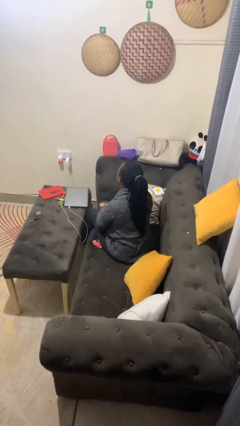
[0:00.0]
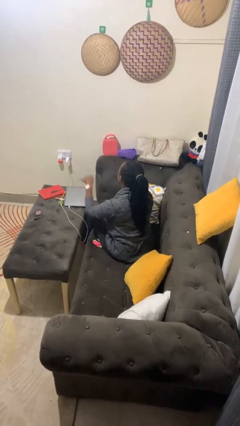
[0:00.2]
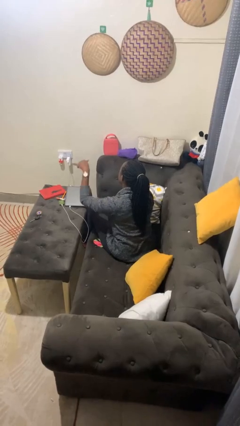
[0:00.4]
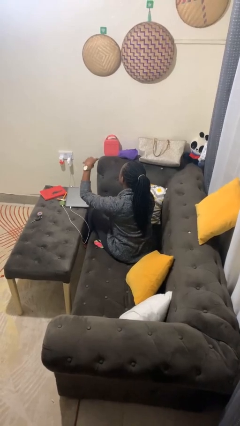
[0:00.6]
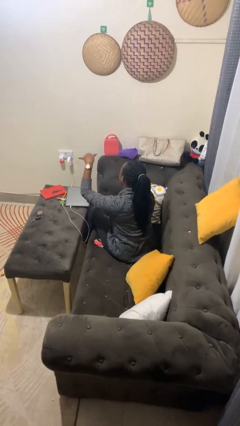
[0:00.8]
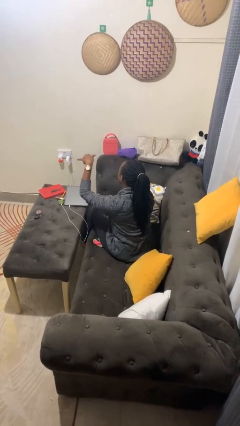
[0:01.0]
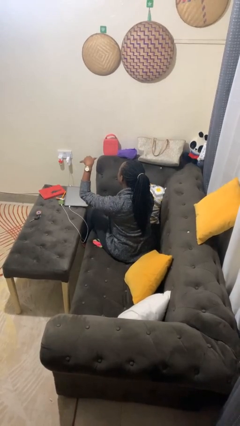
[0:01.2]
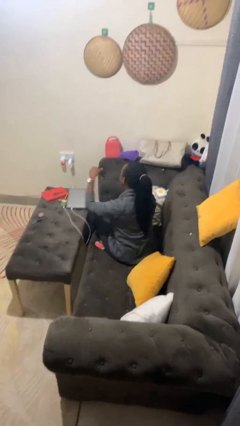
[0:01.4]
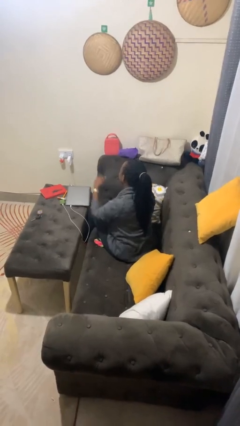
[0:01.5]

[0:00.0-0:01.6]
person gestures hang loose

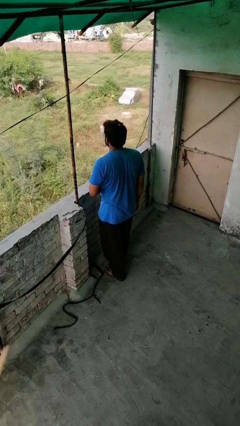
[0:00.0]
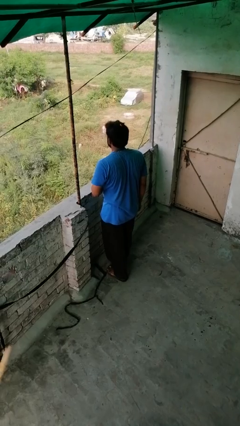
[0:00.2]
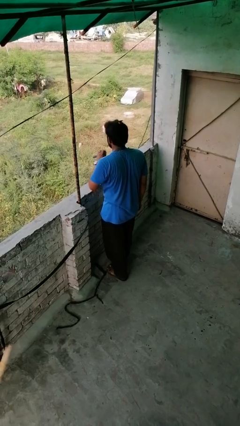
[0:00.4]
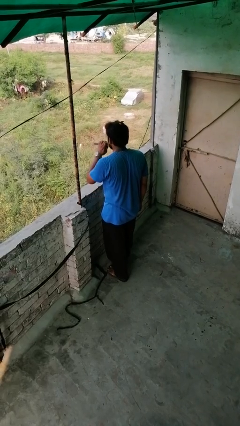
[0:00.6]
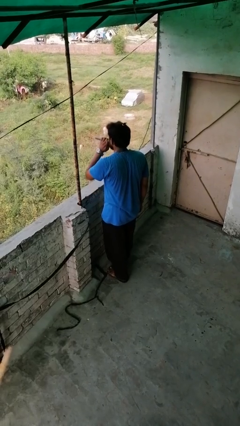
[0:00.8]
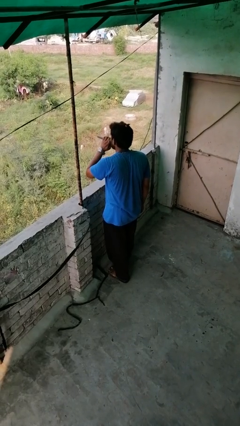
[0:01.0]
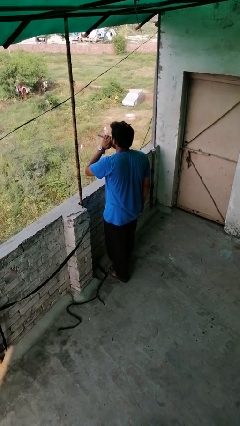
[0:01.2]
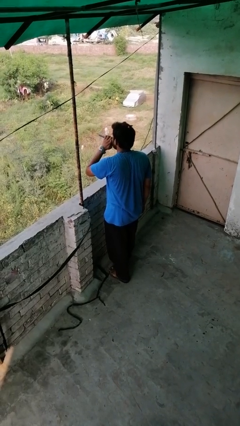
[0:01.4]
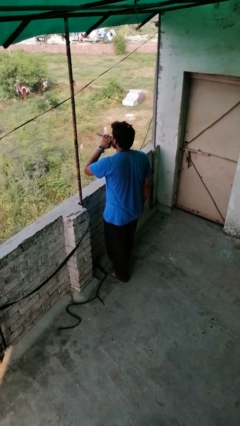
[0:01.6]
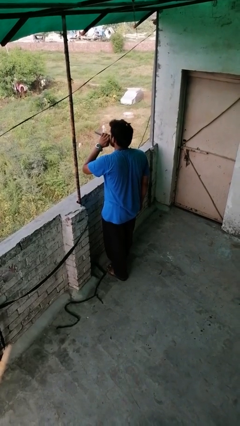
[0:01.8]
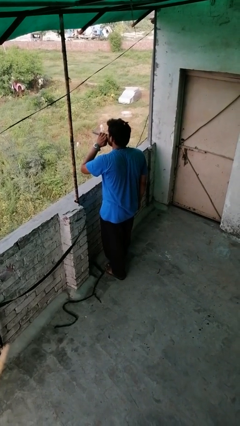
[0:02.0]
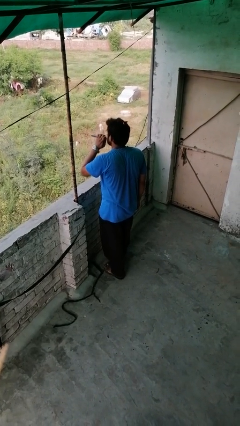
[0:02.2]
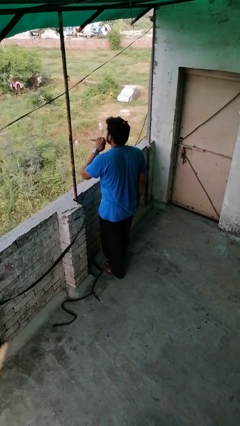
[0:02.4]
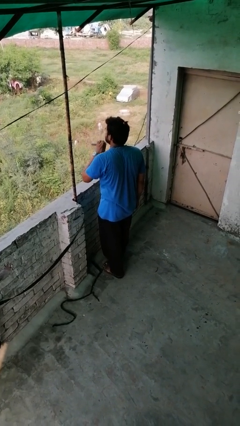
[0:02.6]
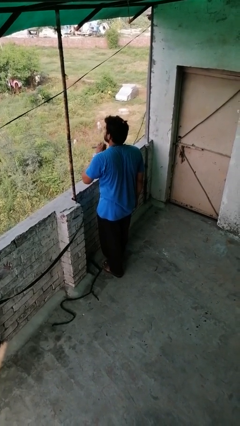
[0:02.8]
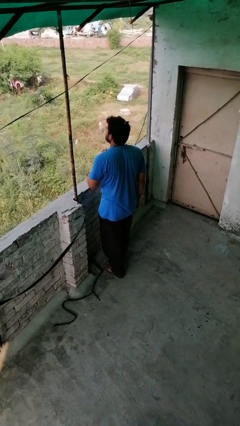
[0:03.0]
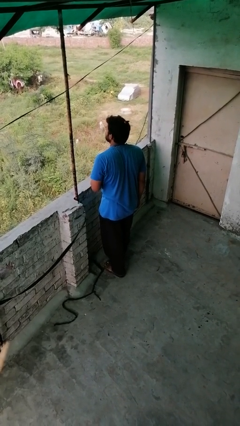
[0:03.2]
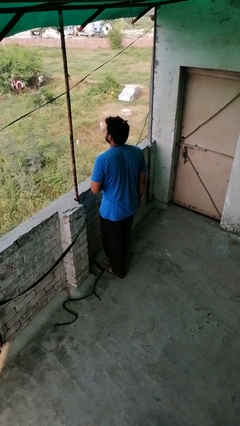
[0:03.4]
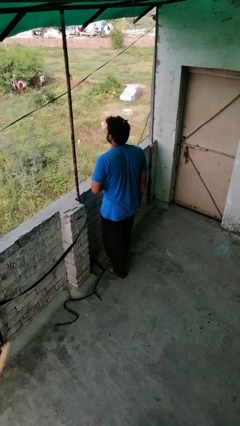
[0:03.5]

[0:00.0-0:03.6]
person vapes

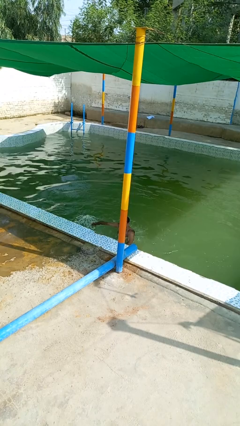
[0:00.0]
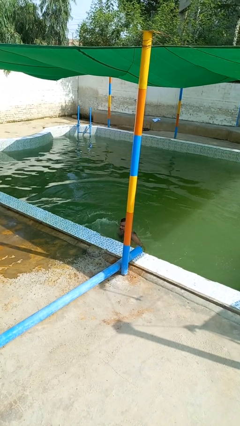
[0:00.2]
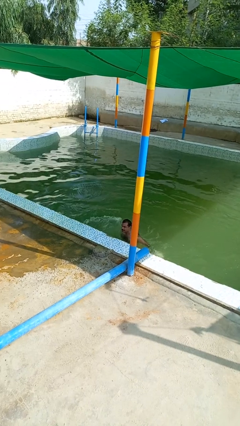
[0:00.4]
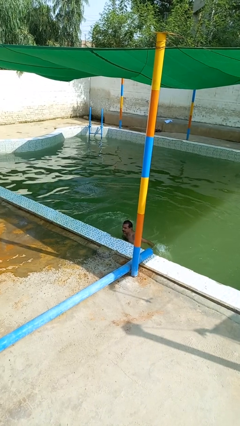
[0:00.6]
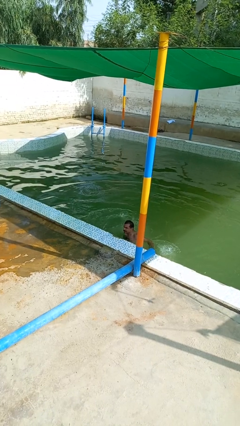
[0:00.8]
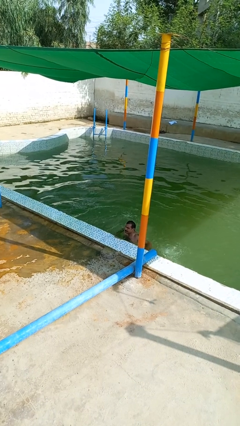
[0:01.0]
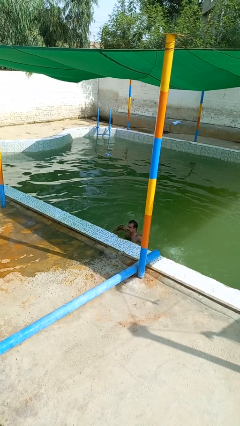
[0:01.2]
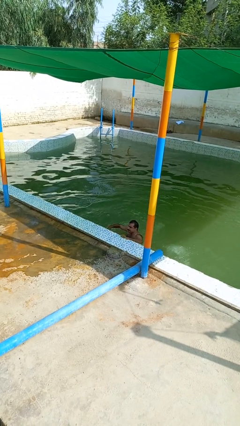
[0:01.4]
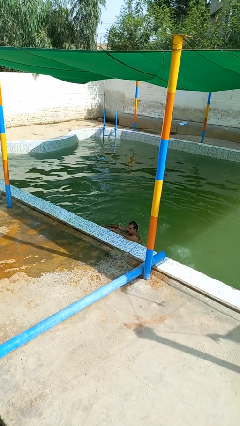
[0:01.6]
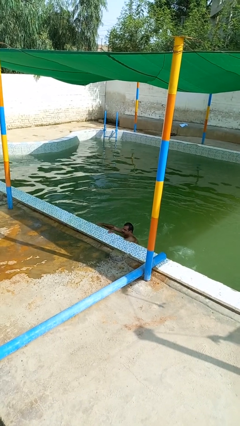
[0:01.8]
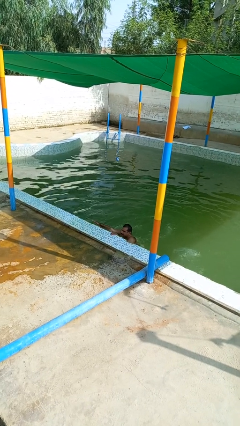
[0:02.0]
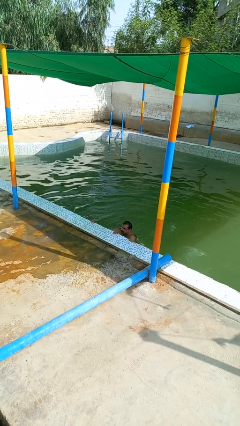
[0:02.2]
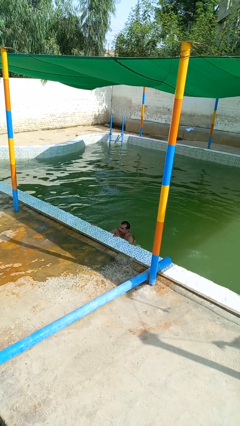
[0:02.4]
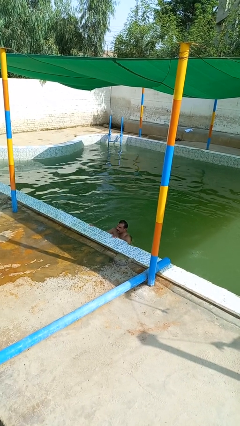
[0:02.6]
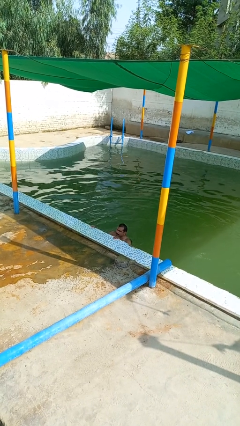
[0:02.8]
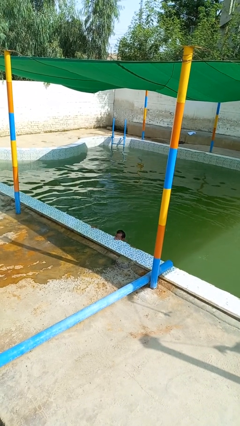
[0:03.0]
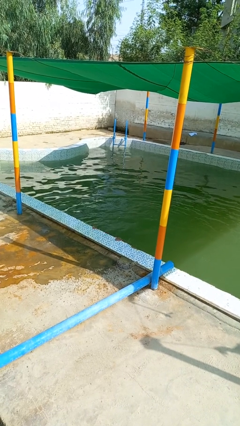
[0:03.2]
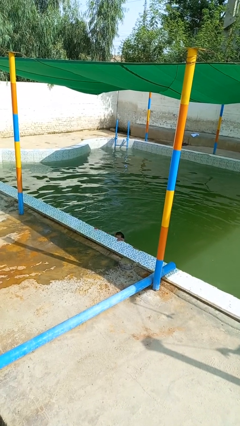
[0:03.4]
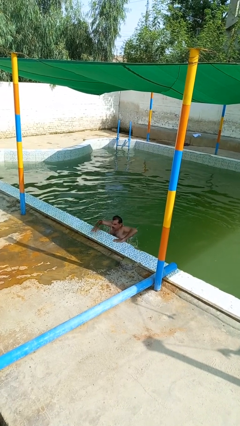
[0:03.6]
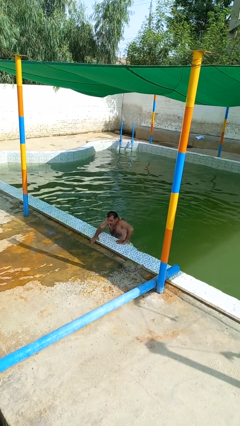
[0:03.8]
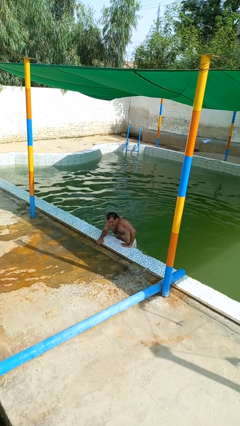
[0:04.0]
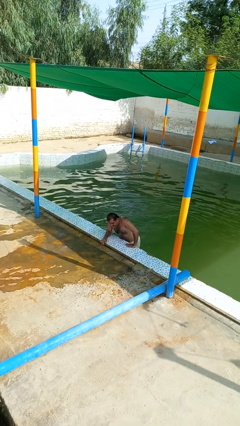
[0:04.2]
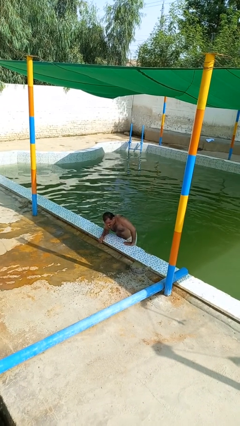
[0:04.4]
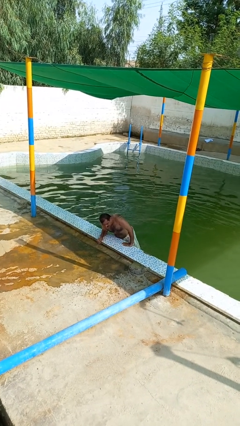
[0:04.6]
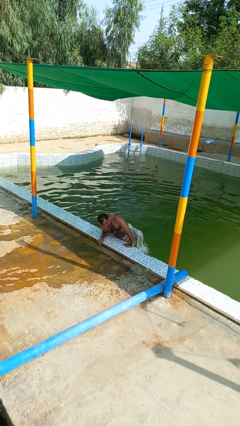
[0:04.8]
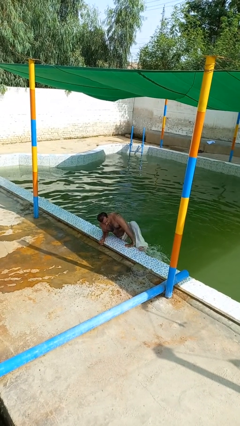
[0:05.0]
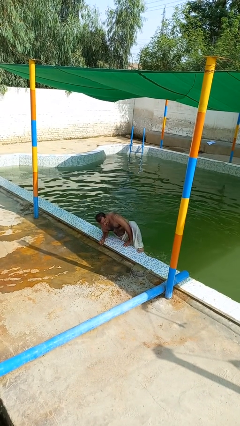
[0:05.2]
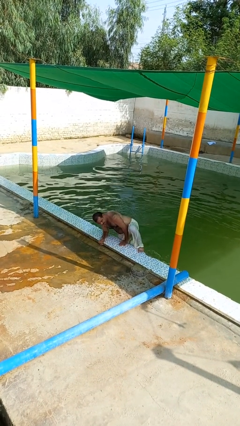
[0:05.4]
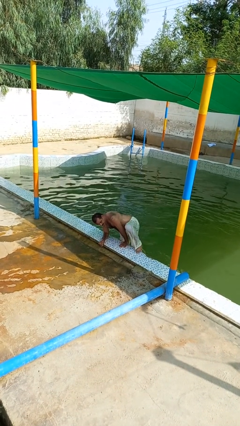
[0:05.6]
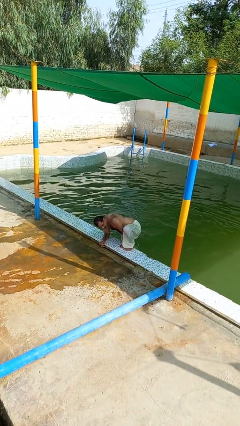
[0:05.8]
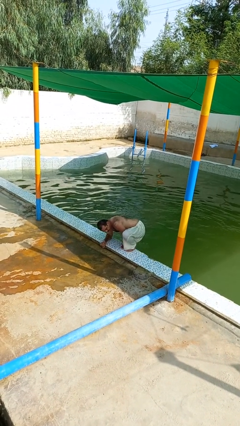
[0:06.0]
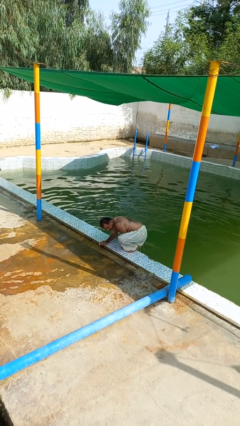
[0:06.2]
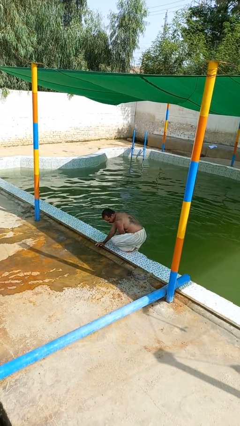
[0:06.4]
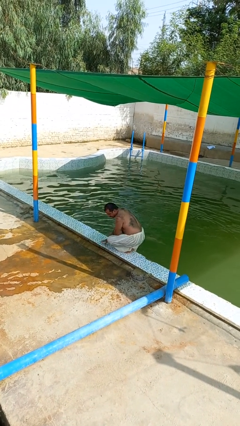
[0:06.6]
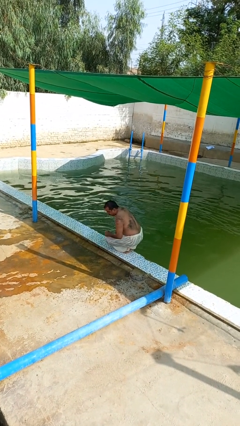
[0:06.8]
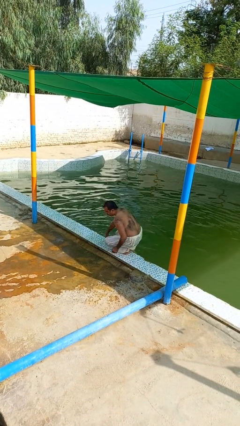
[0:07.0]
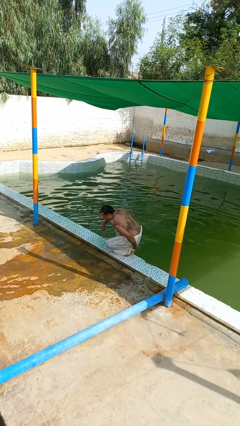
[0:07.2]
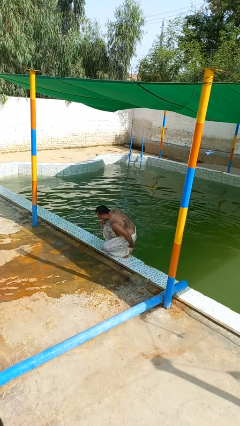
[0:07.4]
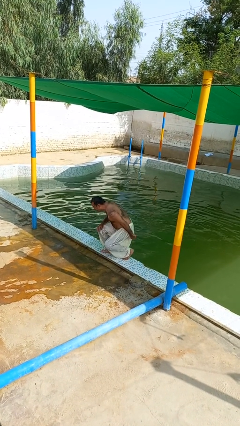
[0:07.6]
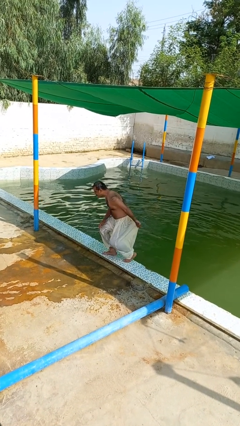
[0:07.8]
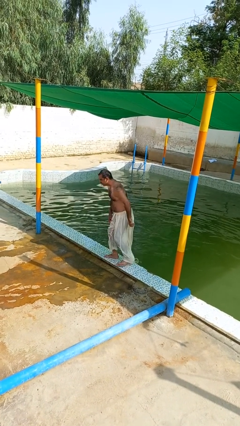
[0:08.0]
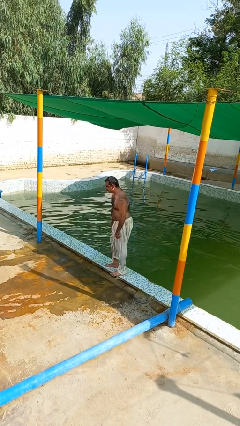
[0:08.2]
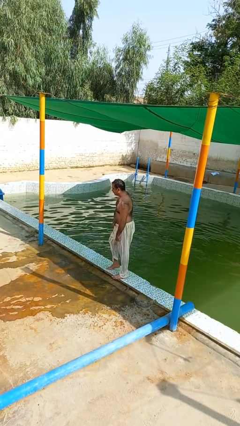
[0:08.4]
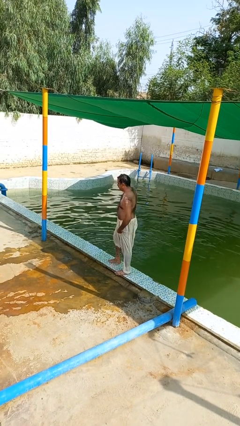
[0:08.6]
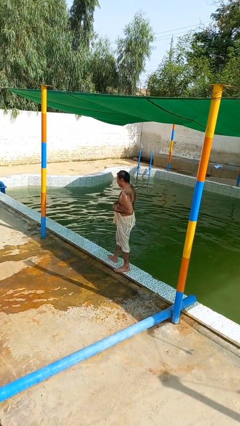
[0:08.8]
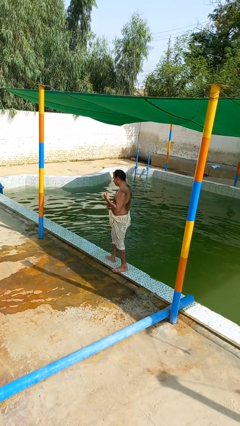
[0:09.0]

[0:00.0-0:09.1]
person exits pool

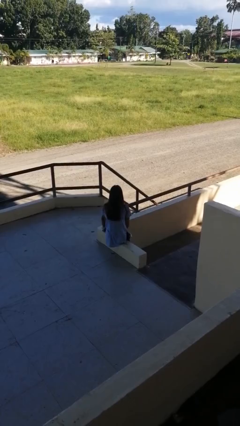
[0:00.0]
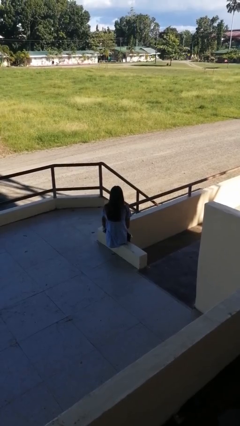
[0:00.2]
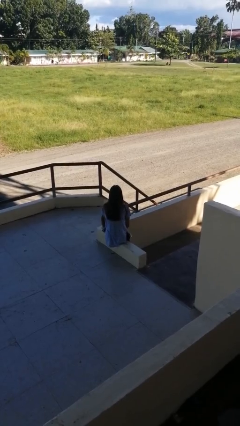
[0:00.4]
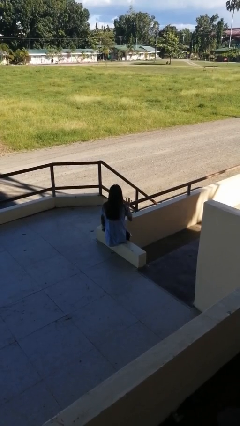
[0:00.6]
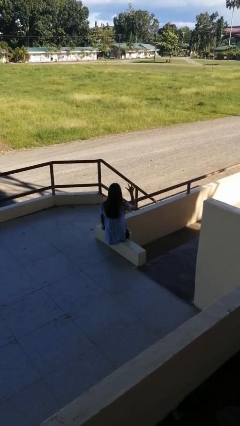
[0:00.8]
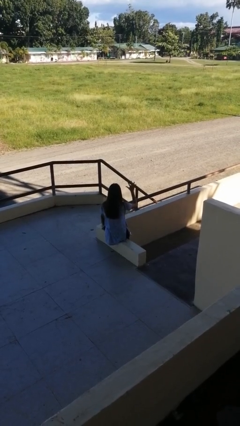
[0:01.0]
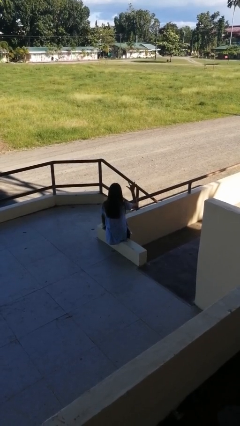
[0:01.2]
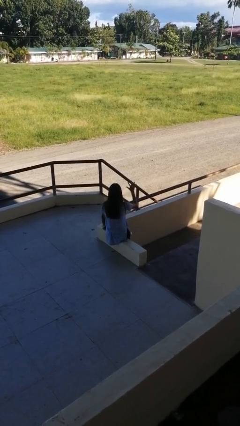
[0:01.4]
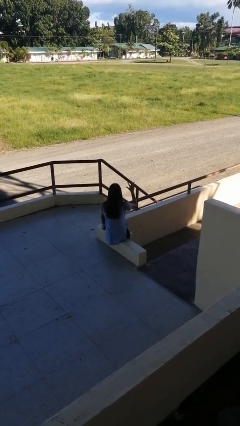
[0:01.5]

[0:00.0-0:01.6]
person gestures number five

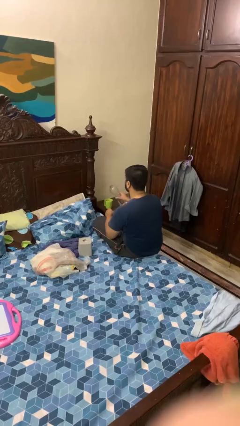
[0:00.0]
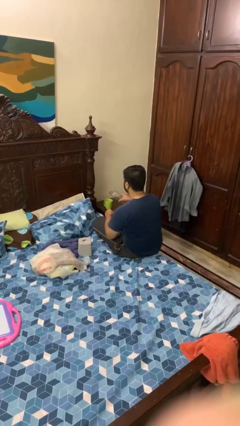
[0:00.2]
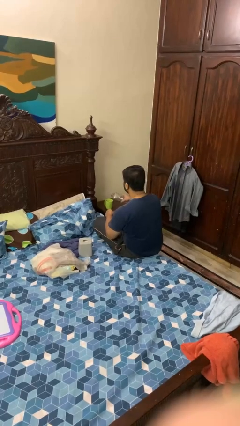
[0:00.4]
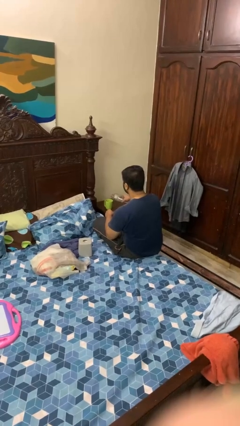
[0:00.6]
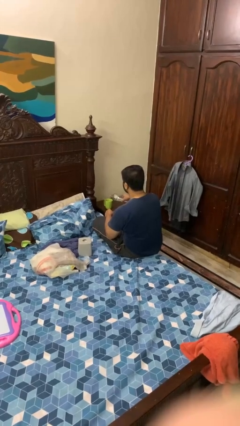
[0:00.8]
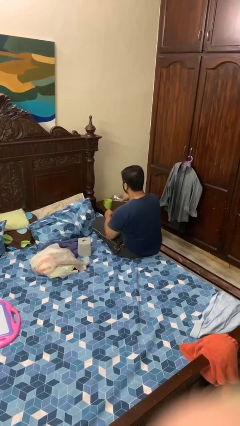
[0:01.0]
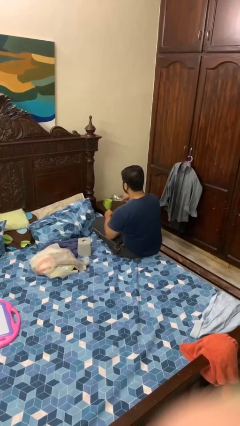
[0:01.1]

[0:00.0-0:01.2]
person pours liquid into cup

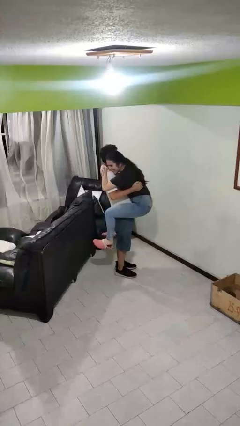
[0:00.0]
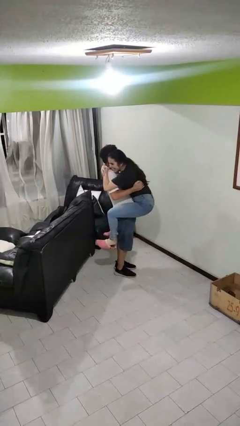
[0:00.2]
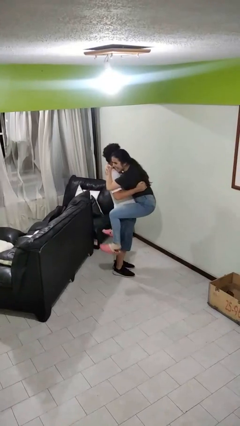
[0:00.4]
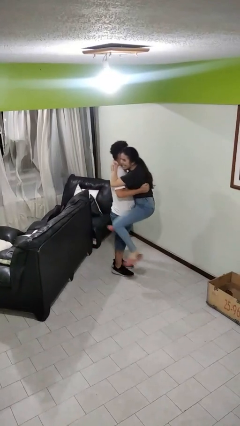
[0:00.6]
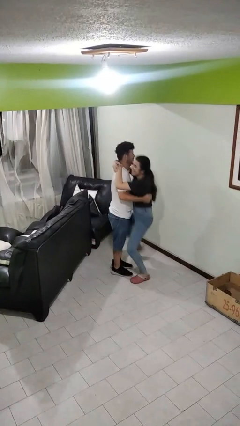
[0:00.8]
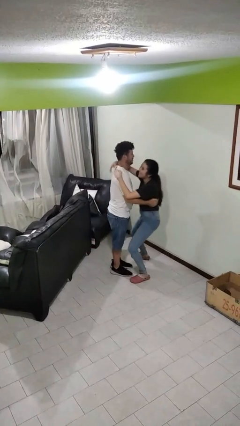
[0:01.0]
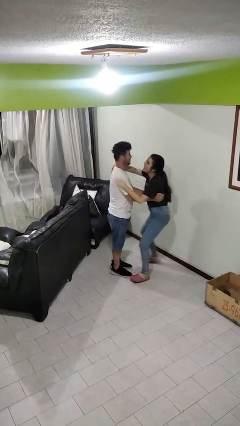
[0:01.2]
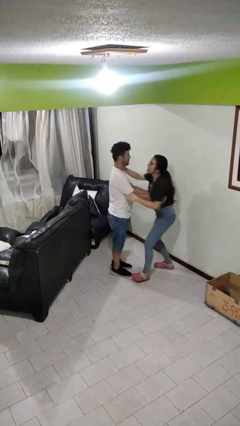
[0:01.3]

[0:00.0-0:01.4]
person puts down person
